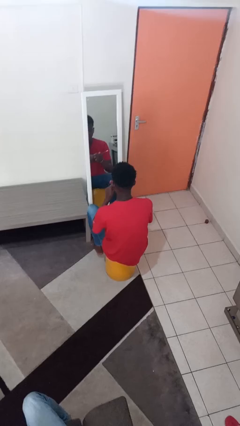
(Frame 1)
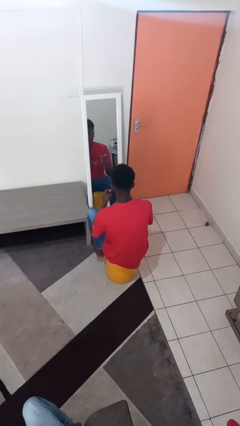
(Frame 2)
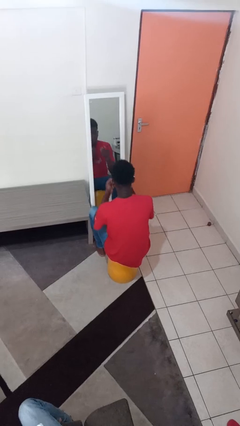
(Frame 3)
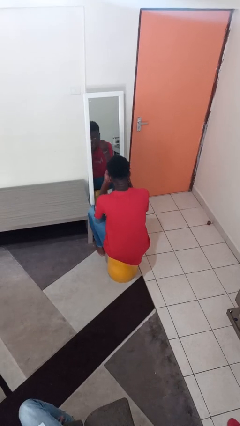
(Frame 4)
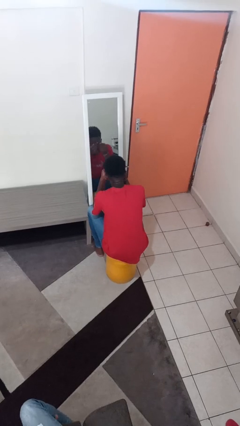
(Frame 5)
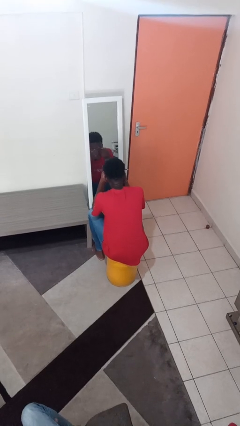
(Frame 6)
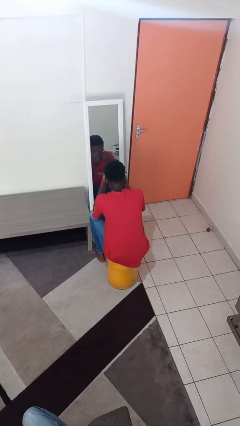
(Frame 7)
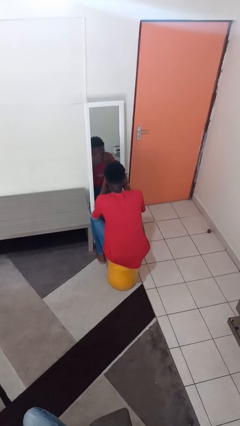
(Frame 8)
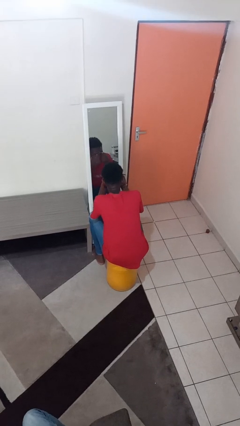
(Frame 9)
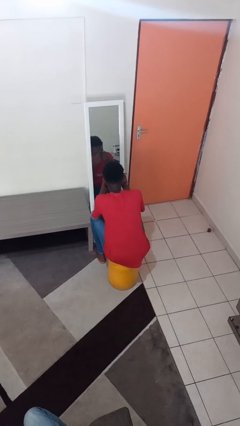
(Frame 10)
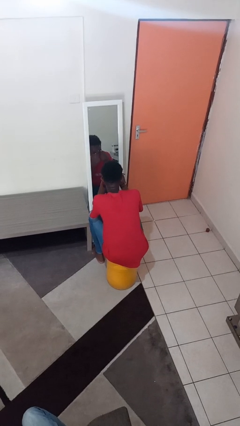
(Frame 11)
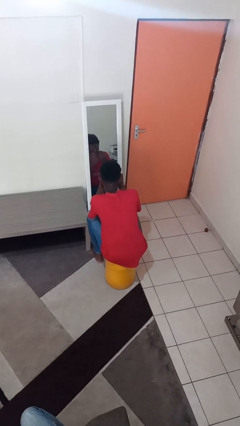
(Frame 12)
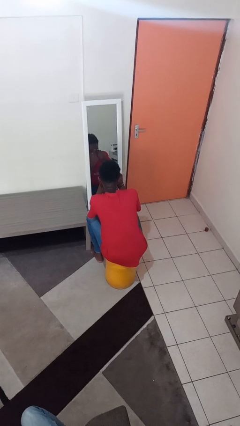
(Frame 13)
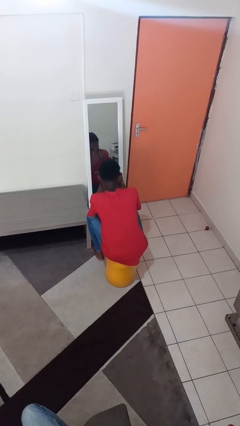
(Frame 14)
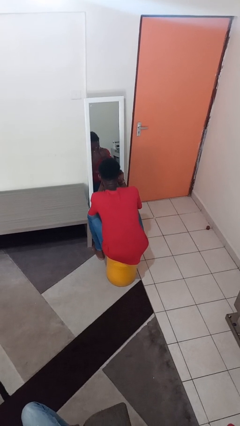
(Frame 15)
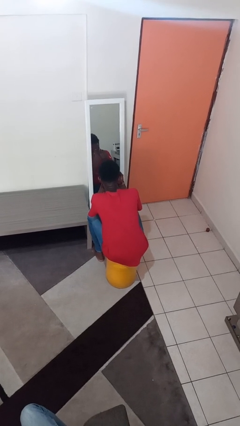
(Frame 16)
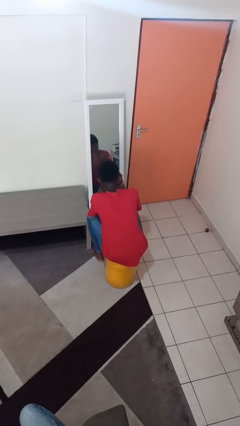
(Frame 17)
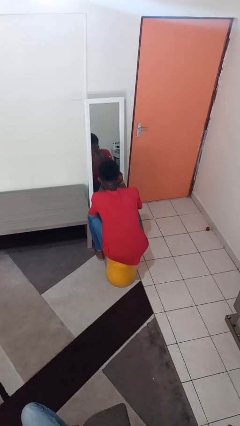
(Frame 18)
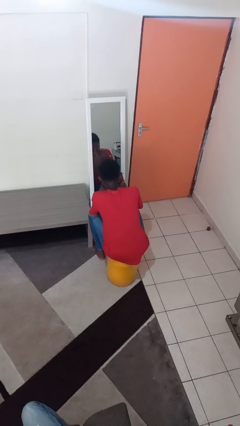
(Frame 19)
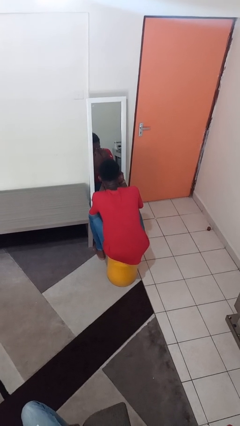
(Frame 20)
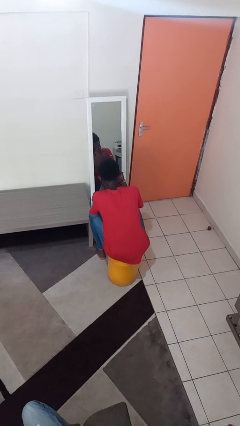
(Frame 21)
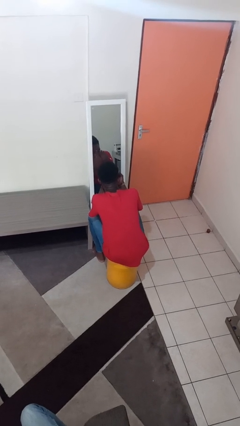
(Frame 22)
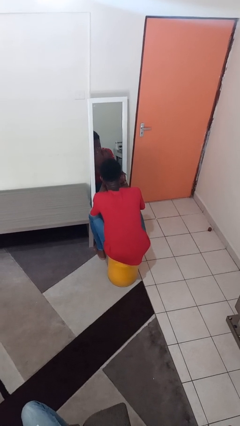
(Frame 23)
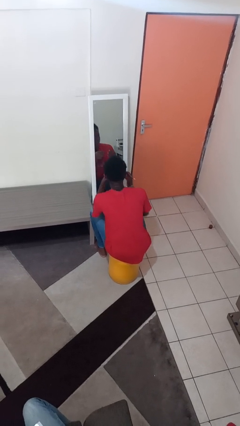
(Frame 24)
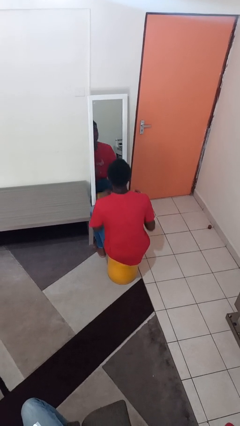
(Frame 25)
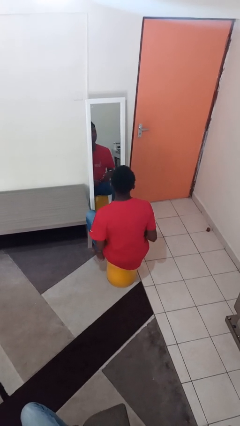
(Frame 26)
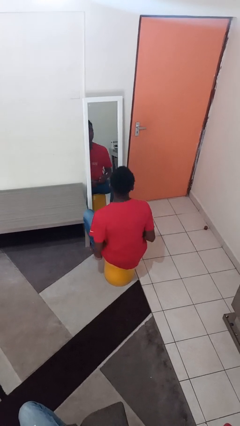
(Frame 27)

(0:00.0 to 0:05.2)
person applies eye makeup

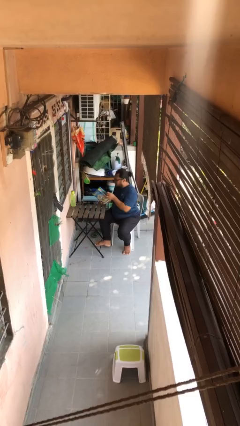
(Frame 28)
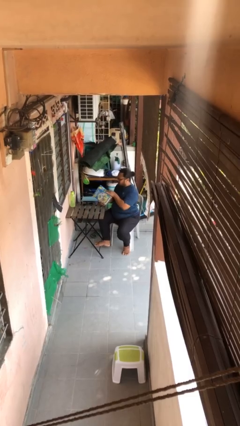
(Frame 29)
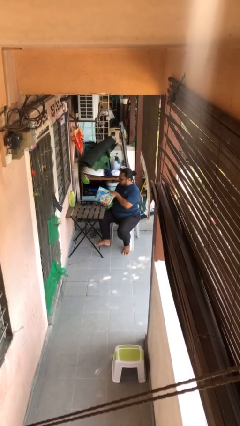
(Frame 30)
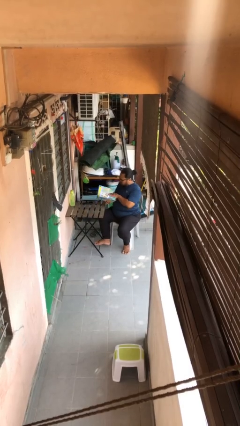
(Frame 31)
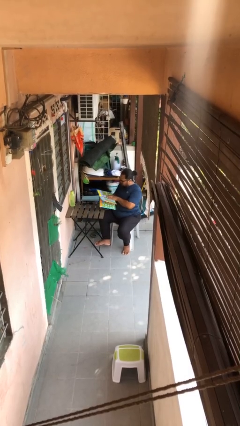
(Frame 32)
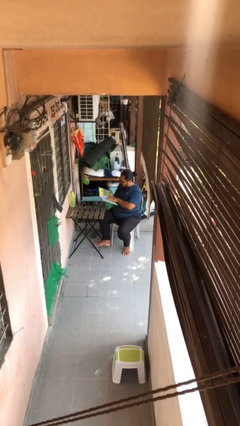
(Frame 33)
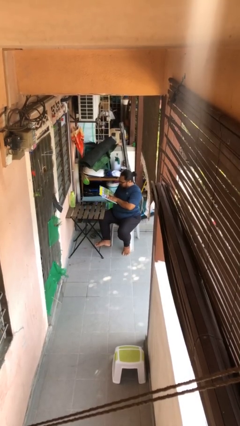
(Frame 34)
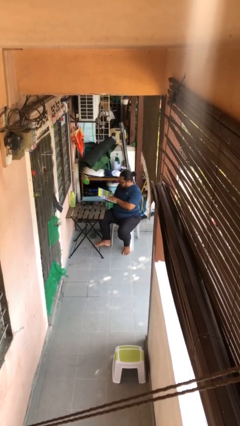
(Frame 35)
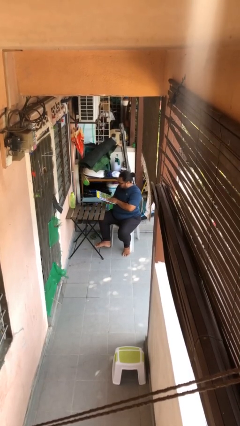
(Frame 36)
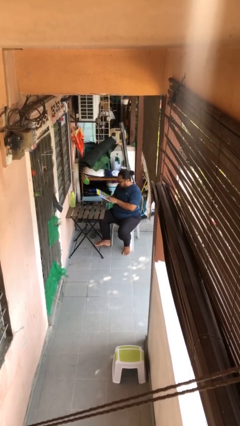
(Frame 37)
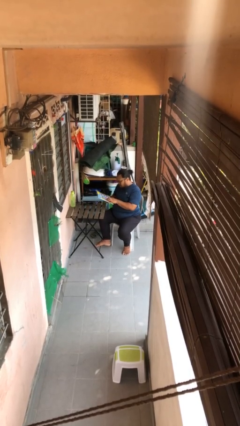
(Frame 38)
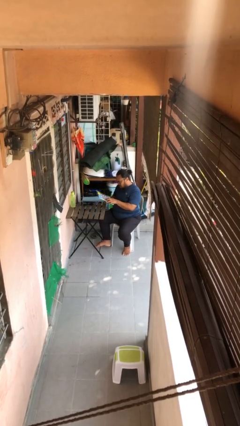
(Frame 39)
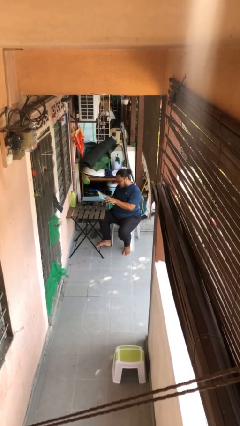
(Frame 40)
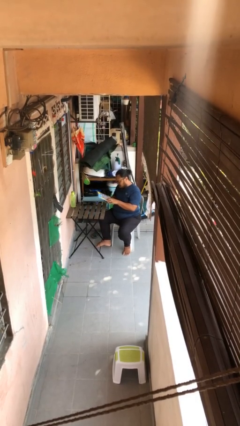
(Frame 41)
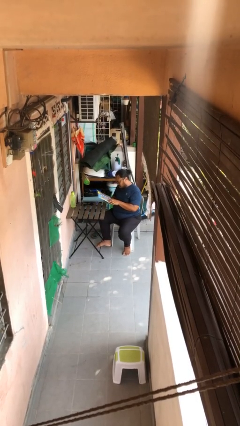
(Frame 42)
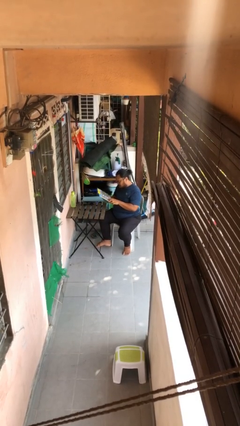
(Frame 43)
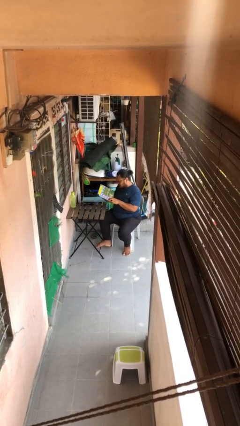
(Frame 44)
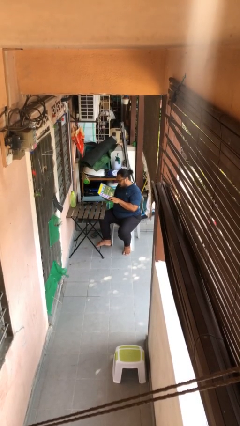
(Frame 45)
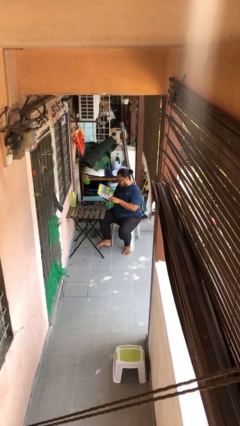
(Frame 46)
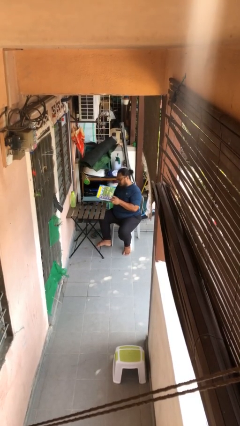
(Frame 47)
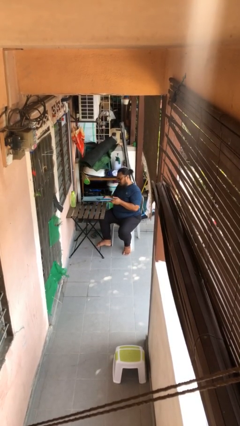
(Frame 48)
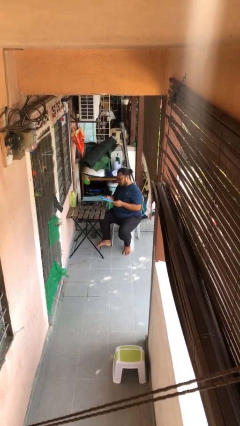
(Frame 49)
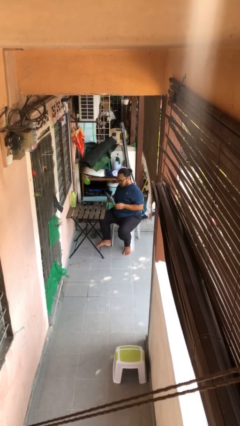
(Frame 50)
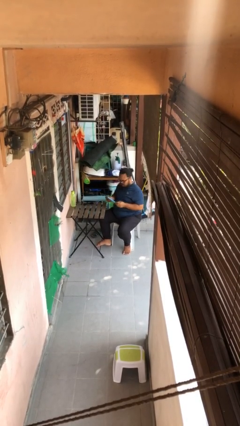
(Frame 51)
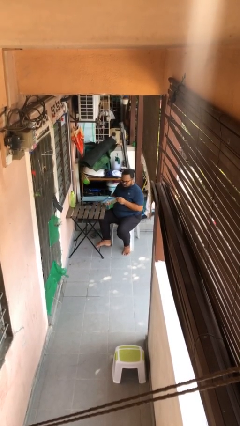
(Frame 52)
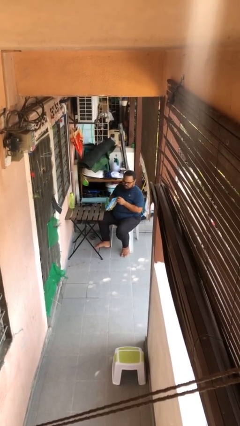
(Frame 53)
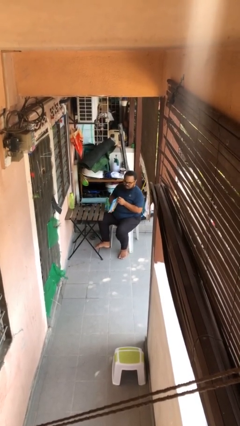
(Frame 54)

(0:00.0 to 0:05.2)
person reads document

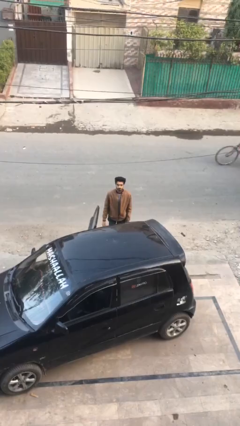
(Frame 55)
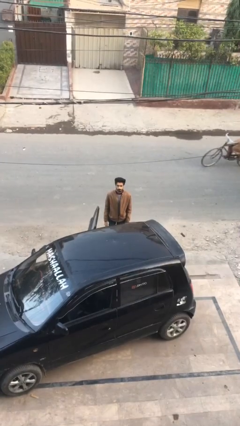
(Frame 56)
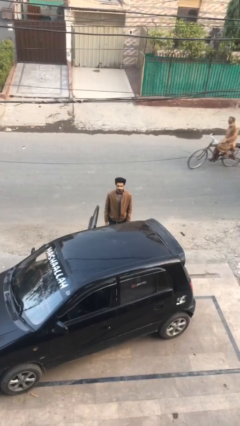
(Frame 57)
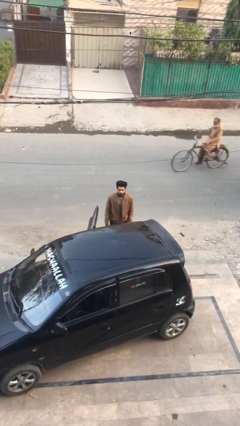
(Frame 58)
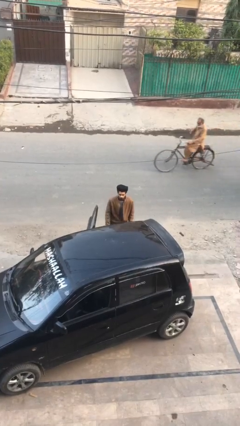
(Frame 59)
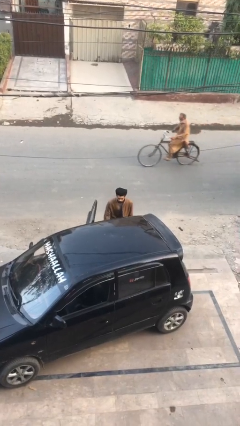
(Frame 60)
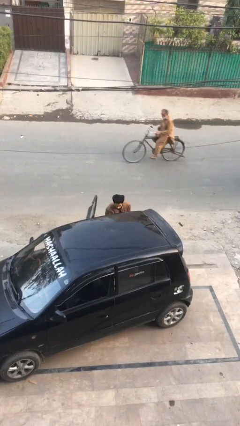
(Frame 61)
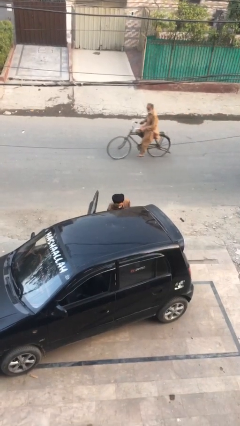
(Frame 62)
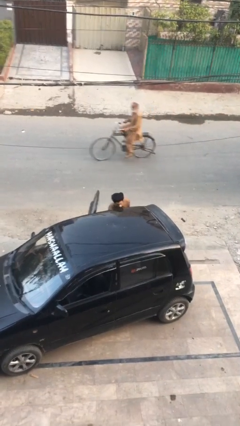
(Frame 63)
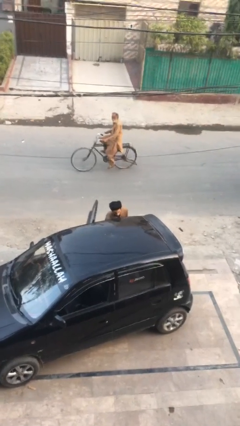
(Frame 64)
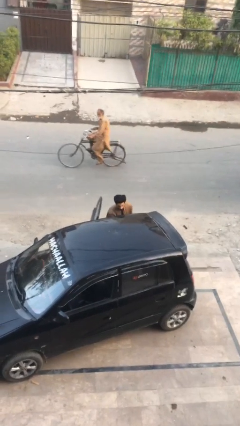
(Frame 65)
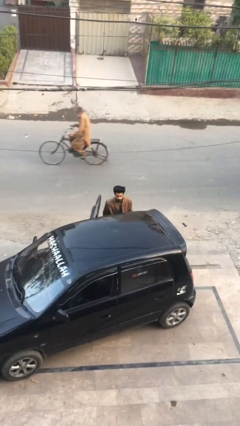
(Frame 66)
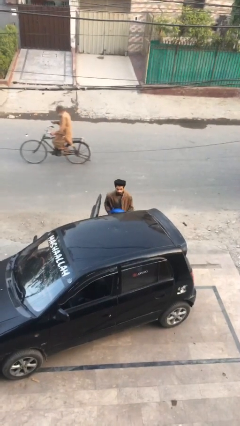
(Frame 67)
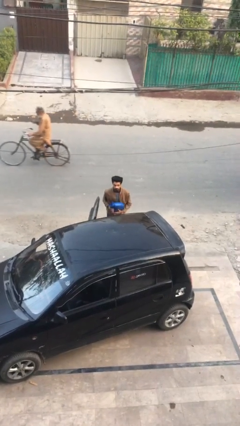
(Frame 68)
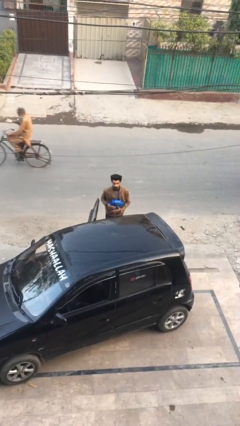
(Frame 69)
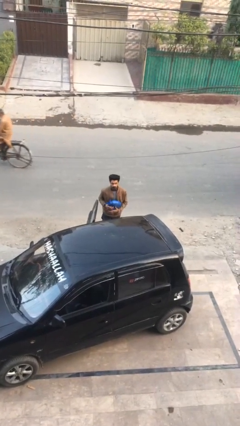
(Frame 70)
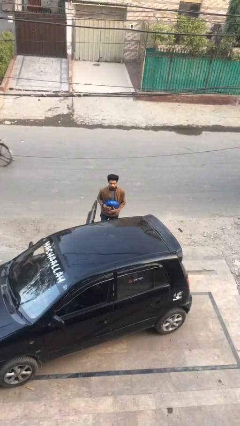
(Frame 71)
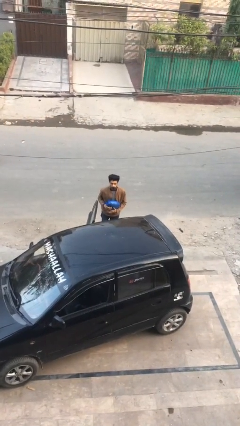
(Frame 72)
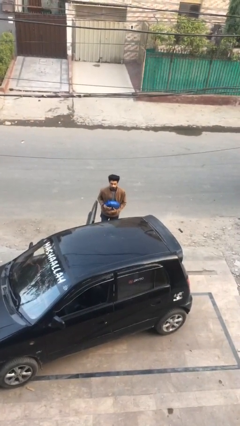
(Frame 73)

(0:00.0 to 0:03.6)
person unloads car

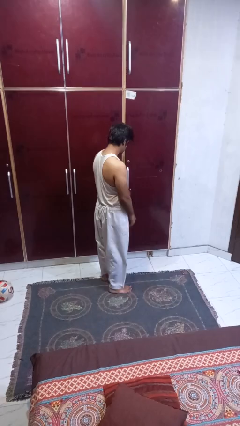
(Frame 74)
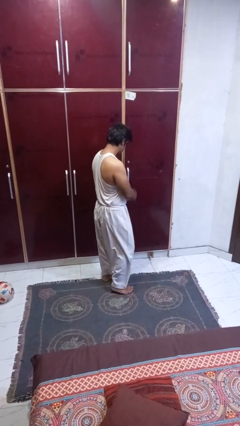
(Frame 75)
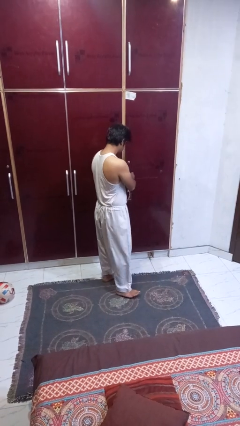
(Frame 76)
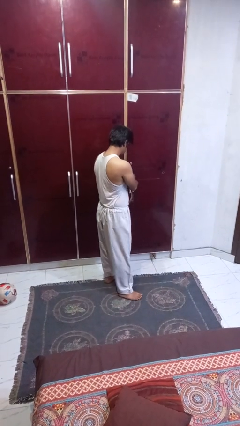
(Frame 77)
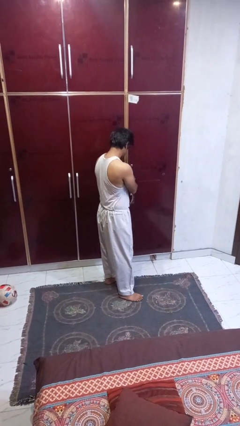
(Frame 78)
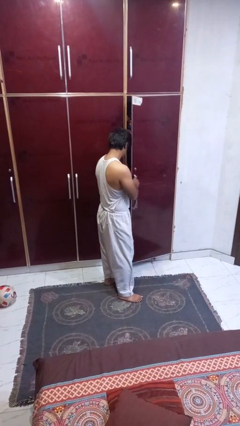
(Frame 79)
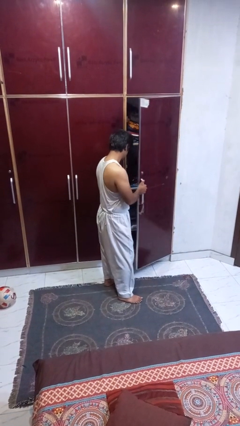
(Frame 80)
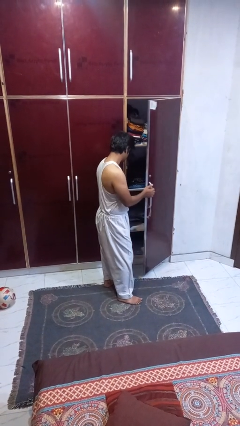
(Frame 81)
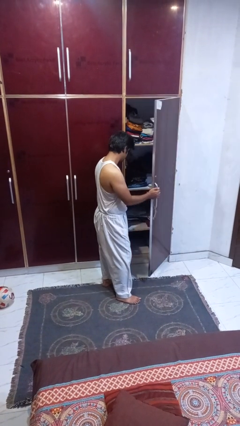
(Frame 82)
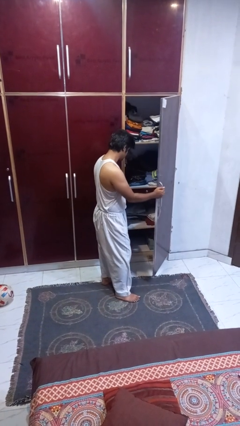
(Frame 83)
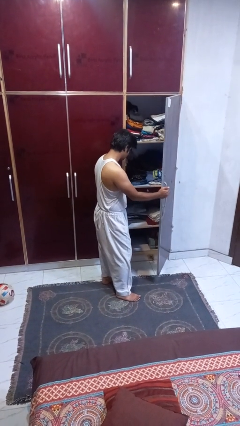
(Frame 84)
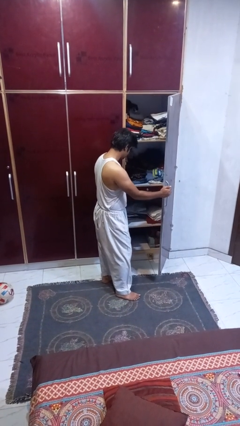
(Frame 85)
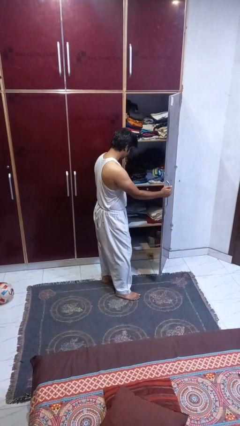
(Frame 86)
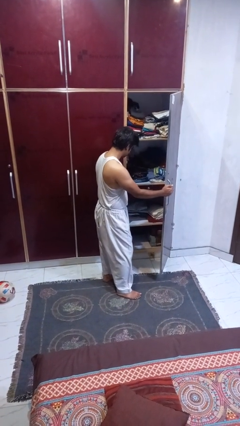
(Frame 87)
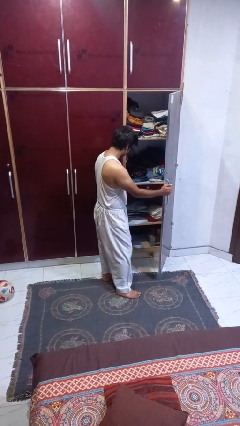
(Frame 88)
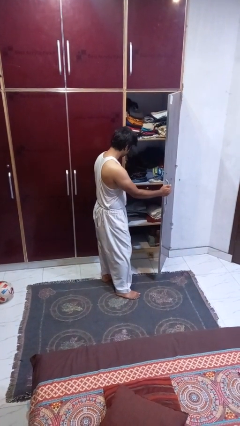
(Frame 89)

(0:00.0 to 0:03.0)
person opens closet door

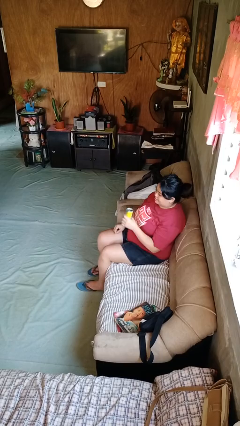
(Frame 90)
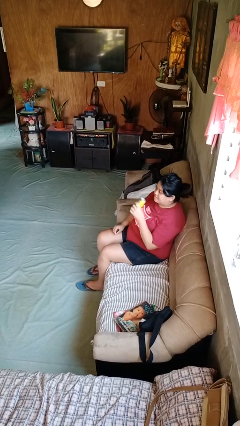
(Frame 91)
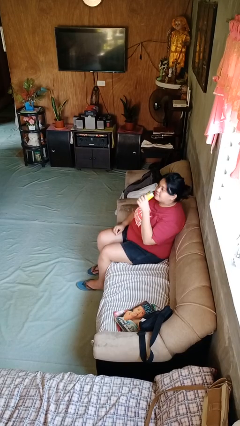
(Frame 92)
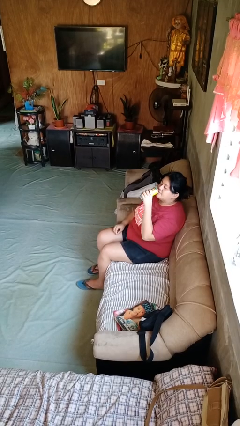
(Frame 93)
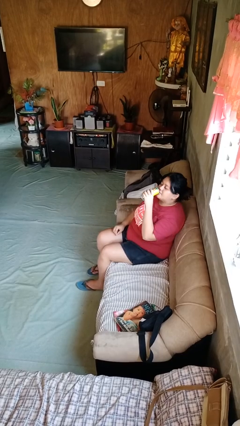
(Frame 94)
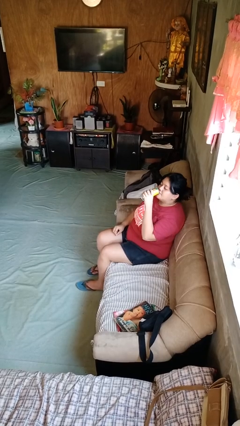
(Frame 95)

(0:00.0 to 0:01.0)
person drinks from beverage can
